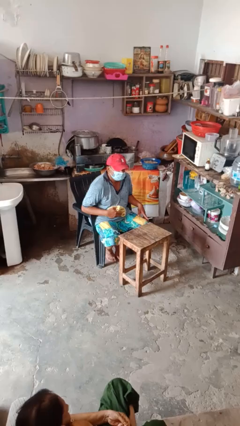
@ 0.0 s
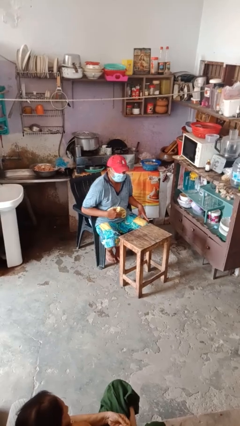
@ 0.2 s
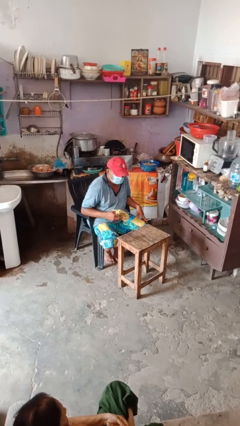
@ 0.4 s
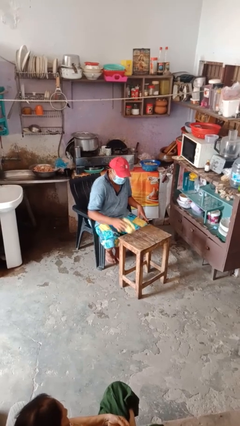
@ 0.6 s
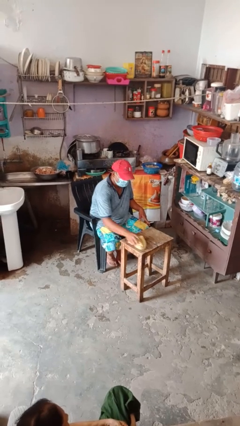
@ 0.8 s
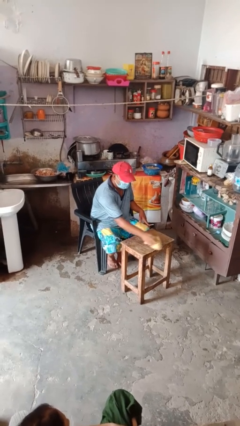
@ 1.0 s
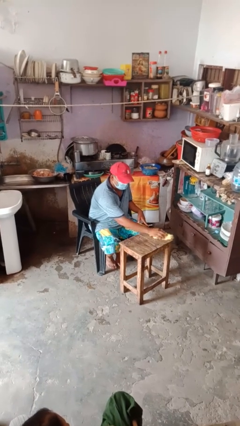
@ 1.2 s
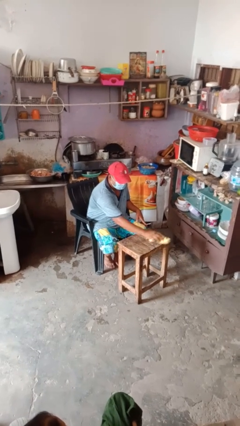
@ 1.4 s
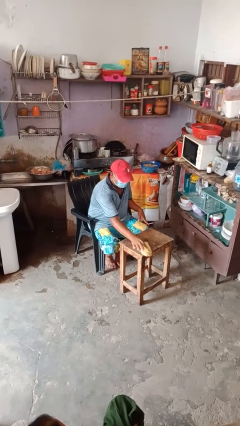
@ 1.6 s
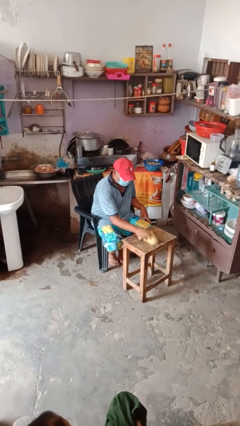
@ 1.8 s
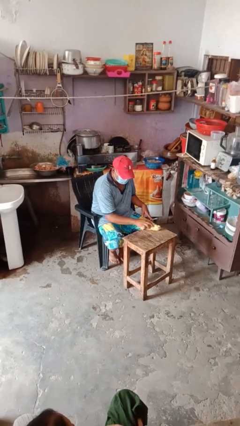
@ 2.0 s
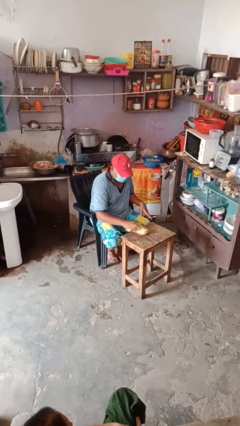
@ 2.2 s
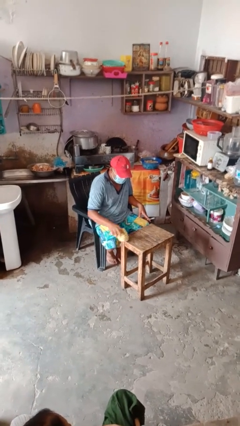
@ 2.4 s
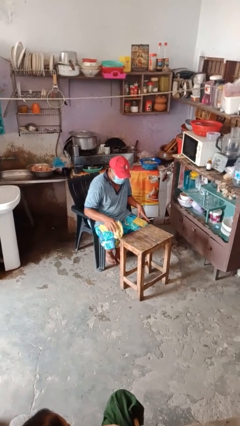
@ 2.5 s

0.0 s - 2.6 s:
person cleans table with rag

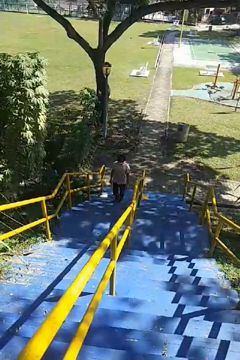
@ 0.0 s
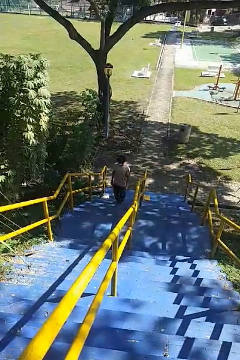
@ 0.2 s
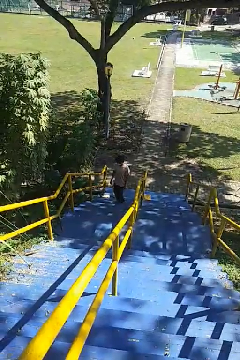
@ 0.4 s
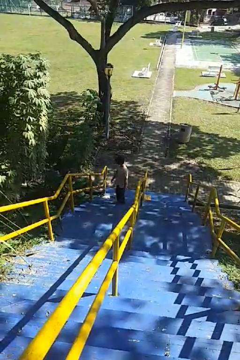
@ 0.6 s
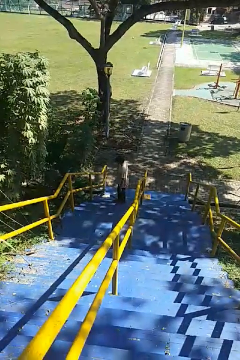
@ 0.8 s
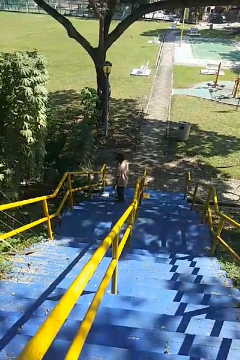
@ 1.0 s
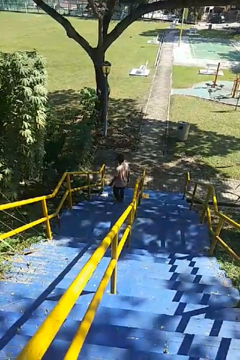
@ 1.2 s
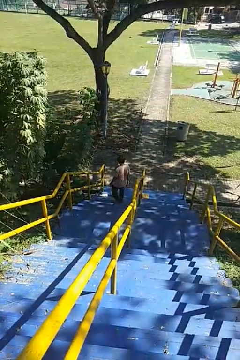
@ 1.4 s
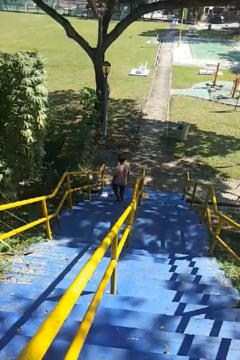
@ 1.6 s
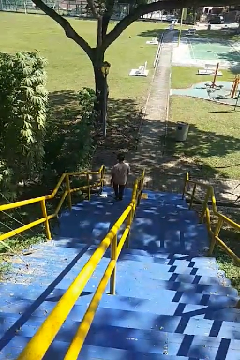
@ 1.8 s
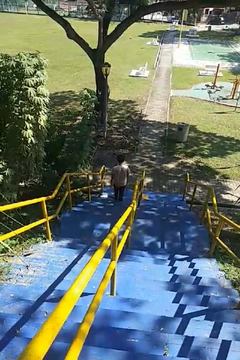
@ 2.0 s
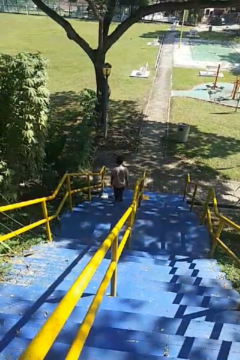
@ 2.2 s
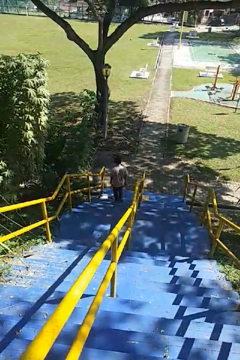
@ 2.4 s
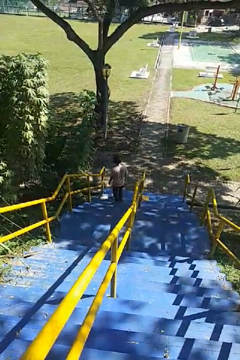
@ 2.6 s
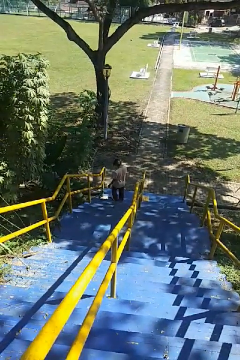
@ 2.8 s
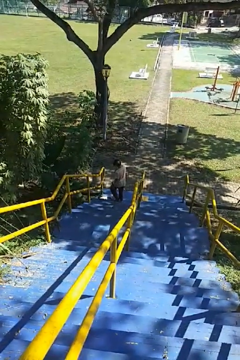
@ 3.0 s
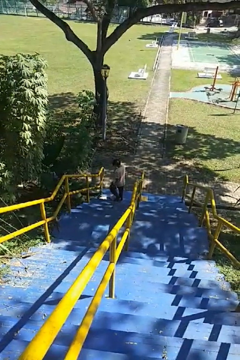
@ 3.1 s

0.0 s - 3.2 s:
person climbs down stairs

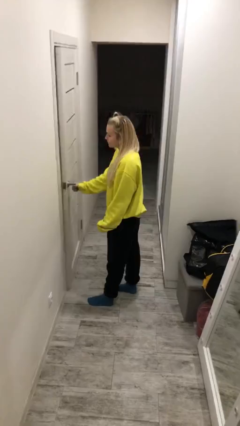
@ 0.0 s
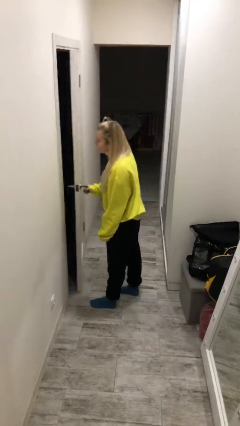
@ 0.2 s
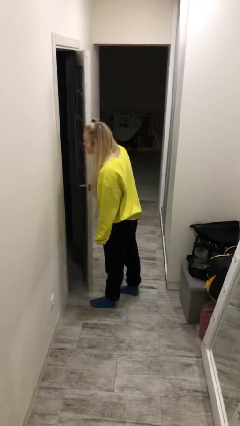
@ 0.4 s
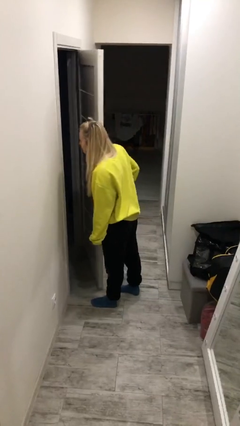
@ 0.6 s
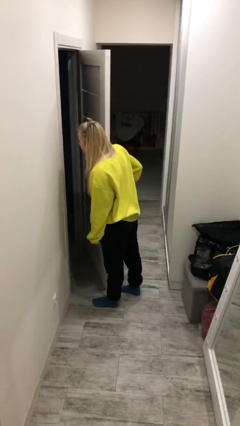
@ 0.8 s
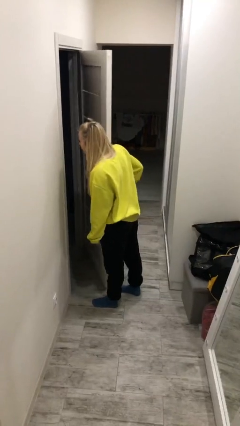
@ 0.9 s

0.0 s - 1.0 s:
person opens facility door

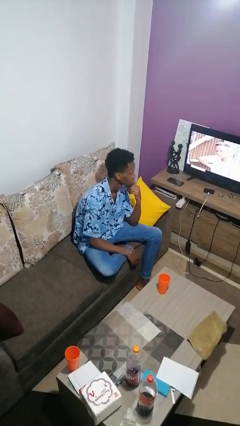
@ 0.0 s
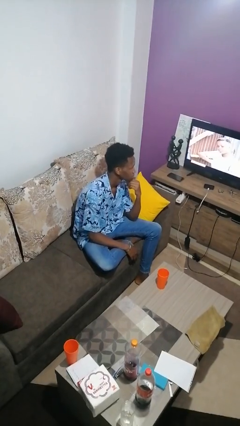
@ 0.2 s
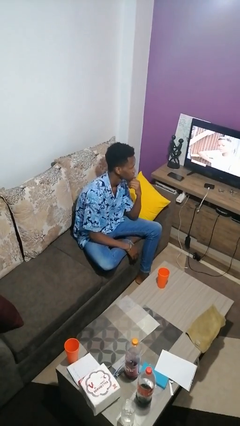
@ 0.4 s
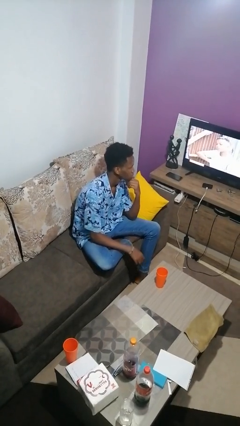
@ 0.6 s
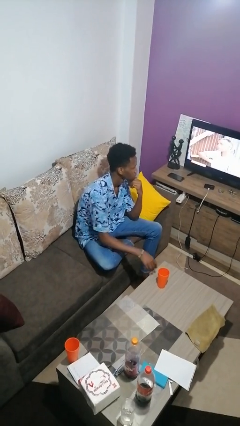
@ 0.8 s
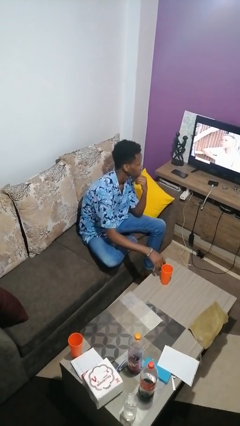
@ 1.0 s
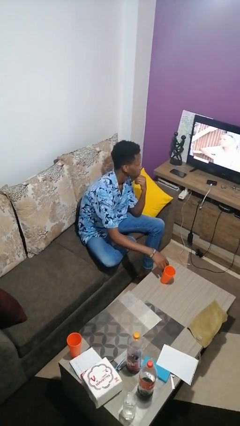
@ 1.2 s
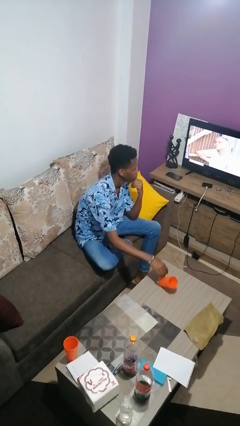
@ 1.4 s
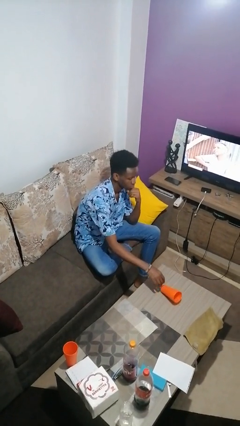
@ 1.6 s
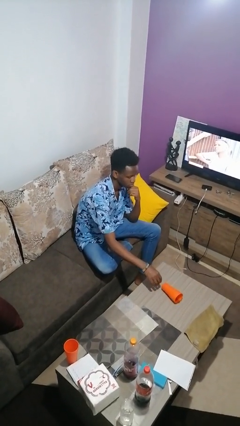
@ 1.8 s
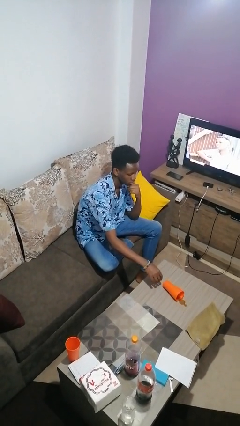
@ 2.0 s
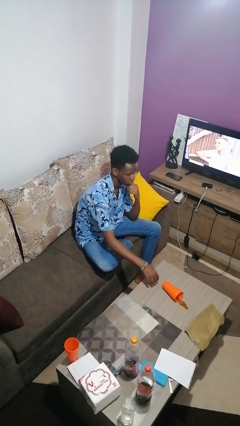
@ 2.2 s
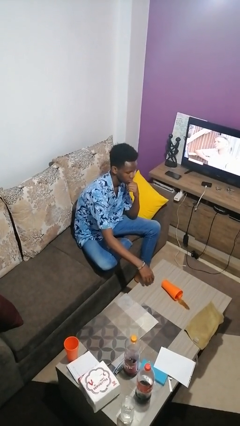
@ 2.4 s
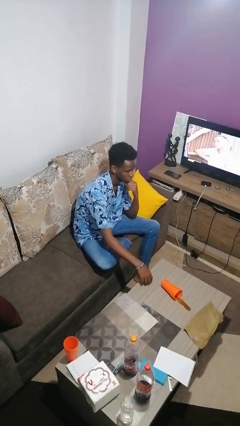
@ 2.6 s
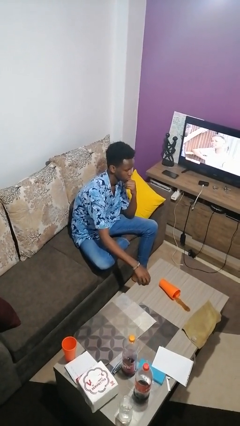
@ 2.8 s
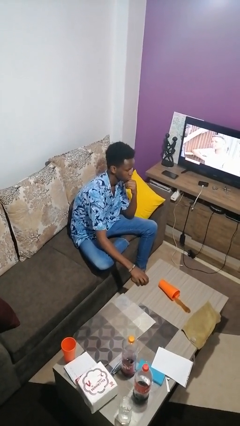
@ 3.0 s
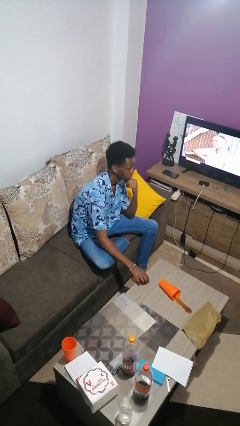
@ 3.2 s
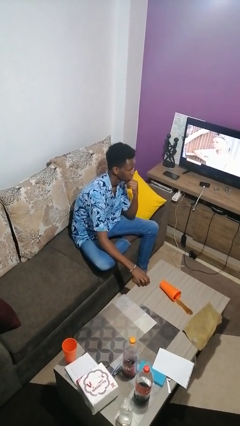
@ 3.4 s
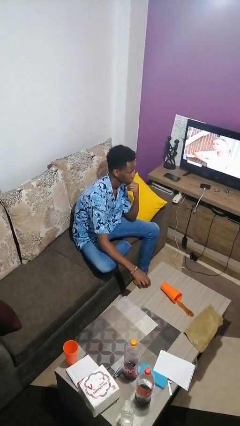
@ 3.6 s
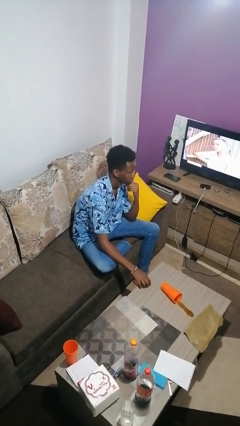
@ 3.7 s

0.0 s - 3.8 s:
person spills on table

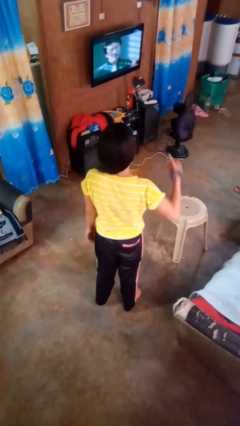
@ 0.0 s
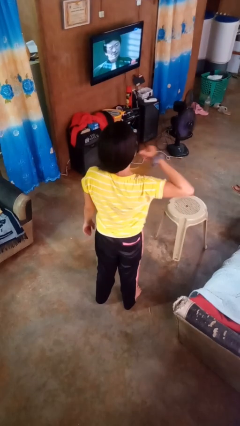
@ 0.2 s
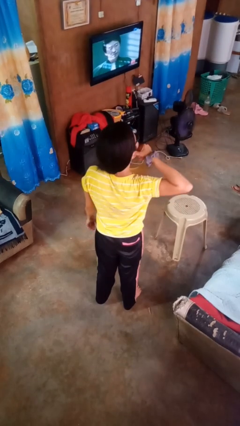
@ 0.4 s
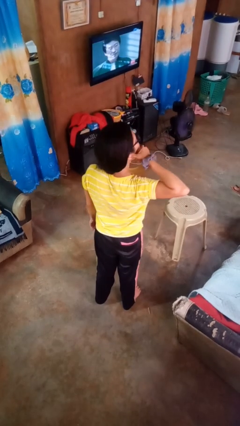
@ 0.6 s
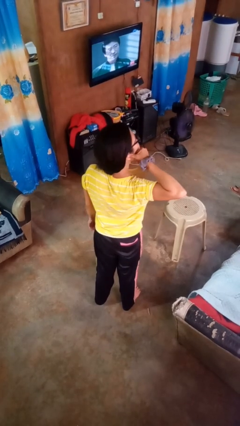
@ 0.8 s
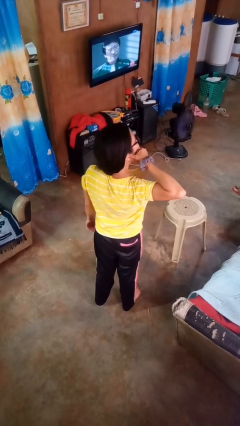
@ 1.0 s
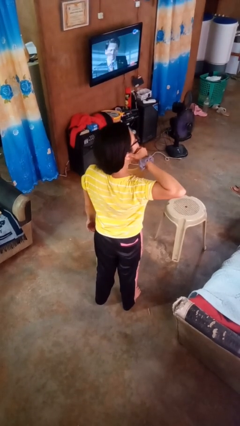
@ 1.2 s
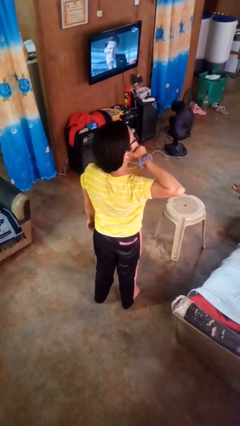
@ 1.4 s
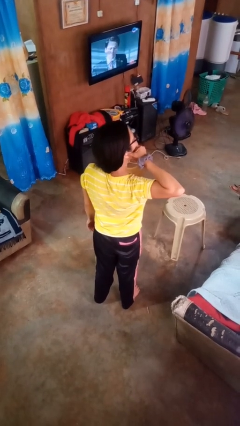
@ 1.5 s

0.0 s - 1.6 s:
person gestures call me

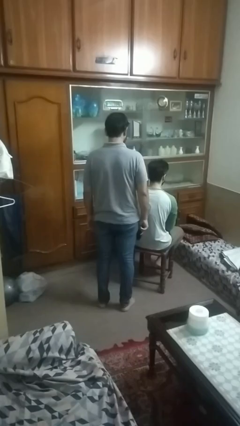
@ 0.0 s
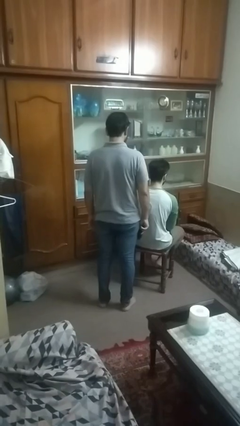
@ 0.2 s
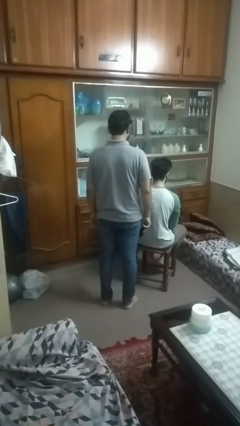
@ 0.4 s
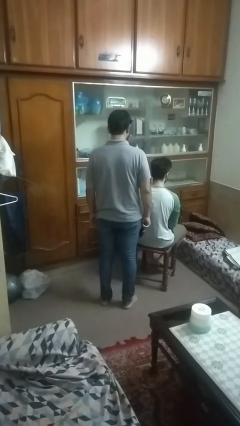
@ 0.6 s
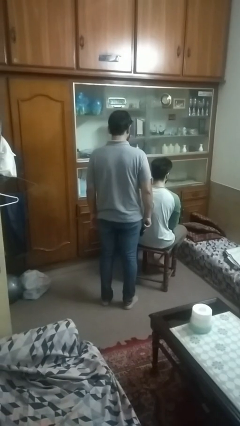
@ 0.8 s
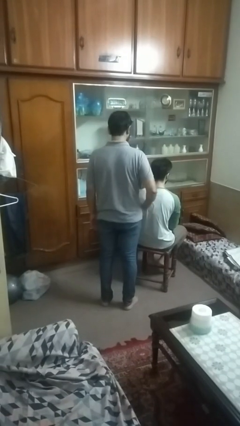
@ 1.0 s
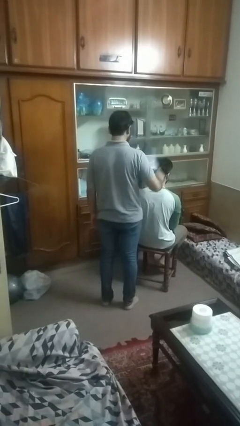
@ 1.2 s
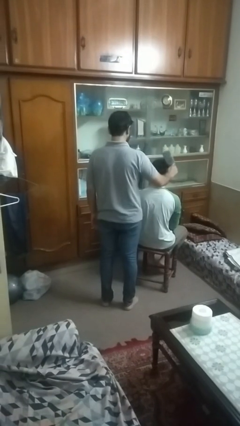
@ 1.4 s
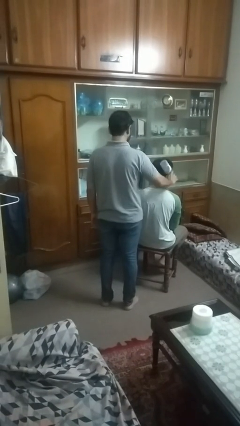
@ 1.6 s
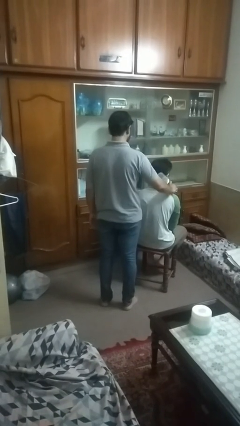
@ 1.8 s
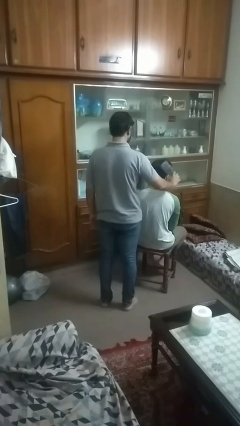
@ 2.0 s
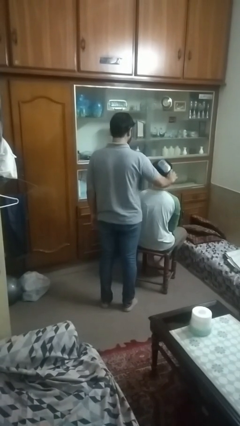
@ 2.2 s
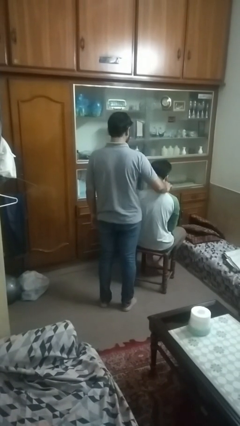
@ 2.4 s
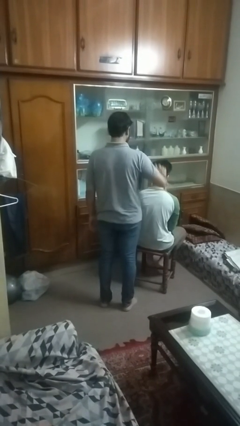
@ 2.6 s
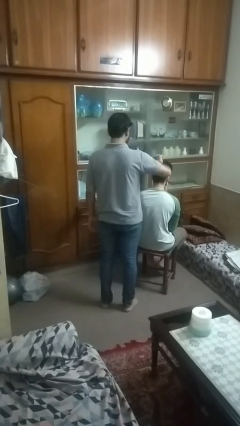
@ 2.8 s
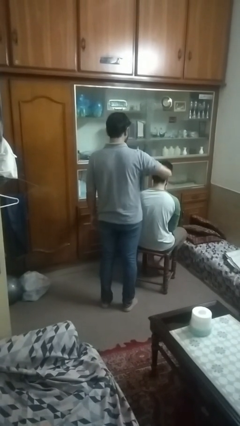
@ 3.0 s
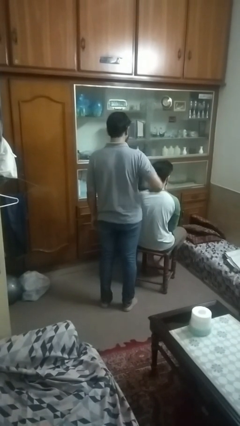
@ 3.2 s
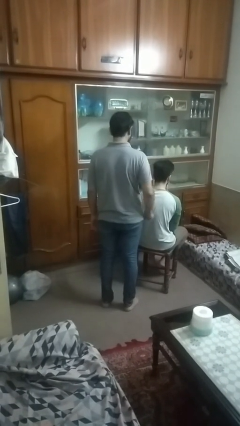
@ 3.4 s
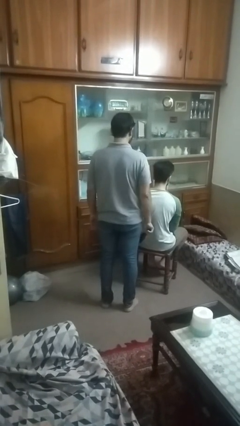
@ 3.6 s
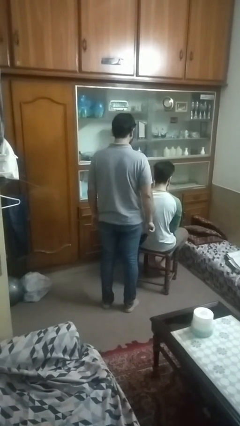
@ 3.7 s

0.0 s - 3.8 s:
person brushes hair of person

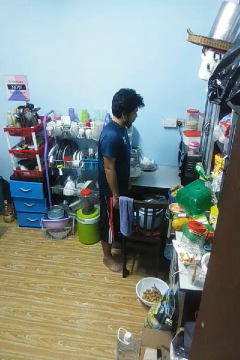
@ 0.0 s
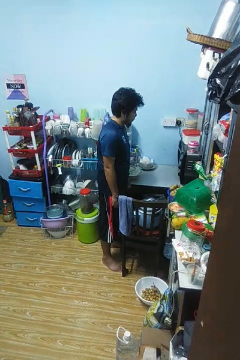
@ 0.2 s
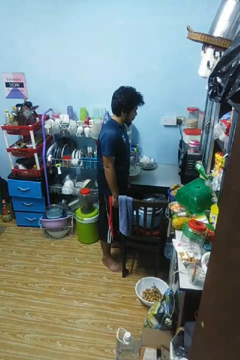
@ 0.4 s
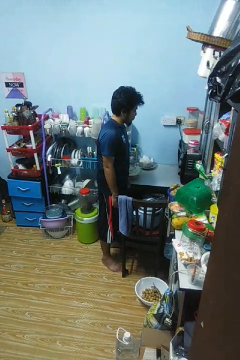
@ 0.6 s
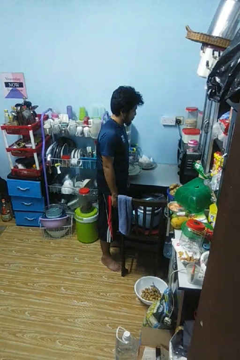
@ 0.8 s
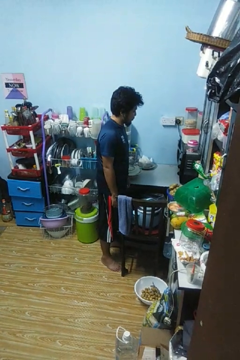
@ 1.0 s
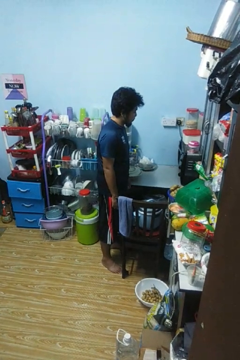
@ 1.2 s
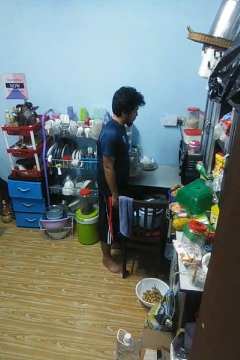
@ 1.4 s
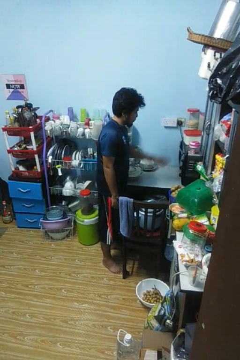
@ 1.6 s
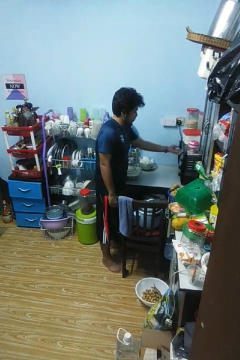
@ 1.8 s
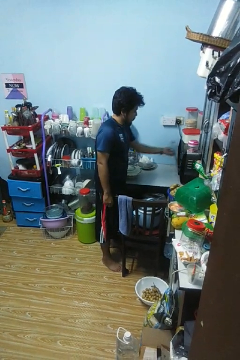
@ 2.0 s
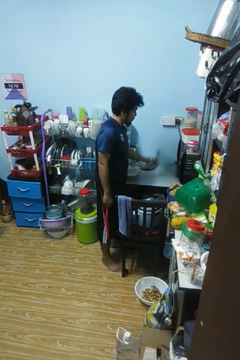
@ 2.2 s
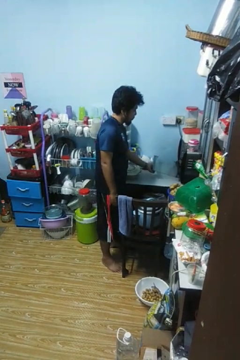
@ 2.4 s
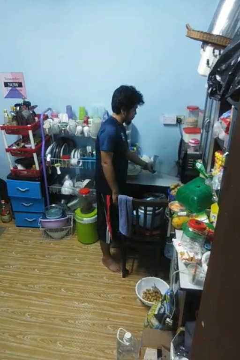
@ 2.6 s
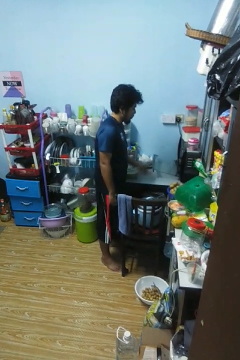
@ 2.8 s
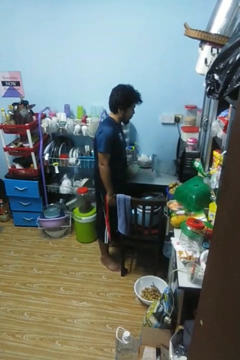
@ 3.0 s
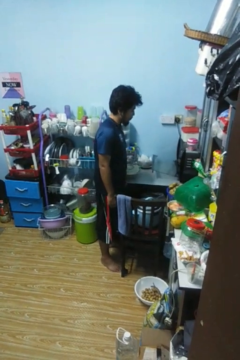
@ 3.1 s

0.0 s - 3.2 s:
person opens oven door
